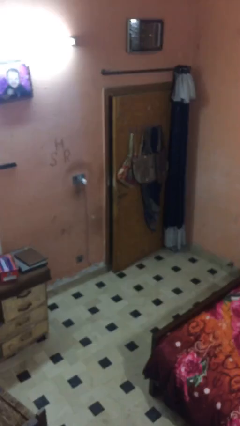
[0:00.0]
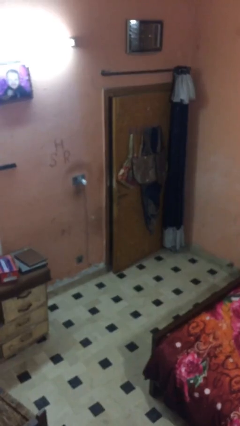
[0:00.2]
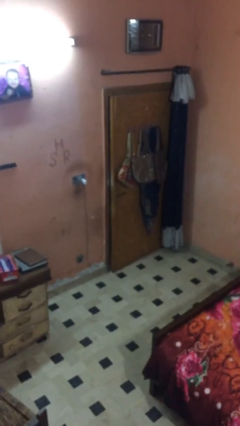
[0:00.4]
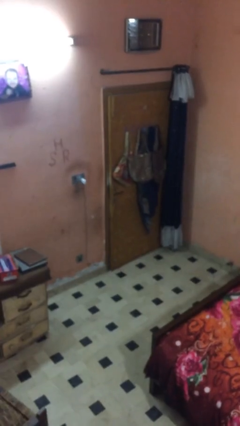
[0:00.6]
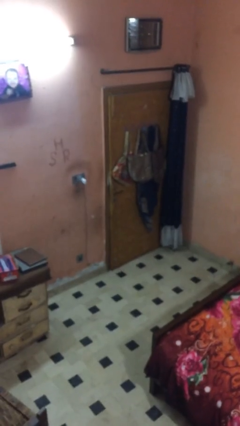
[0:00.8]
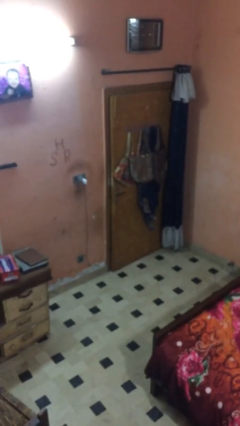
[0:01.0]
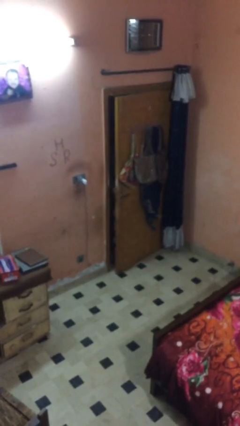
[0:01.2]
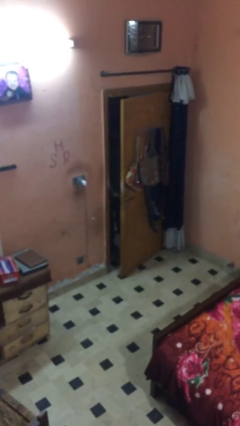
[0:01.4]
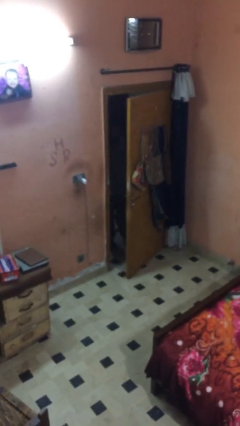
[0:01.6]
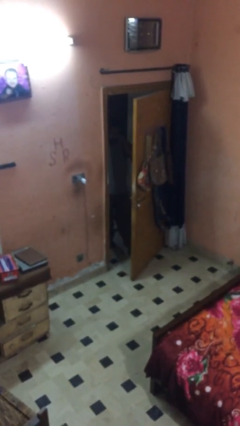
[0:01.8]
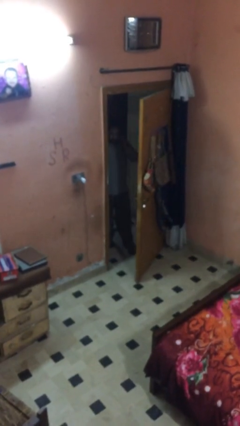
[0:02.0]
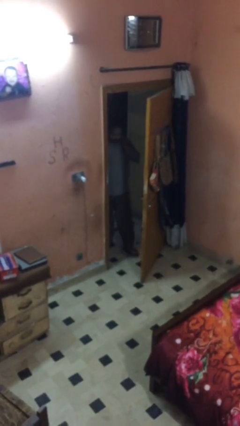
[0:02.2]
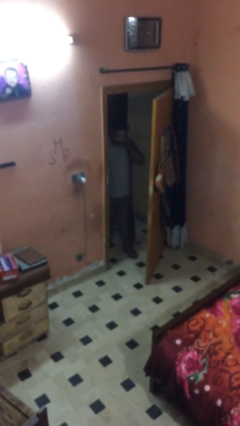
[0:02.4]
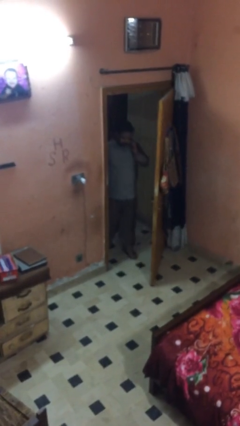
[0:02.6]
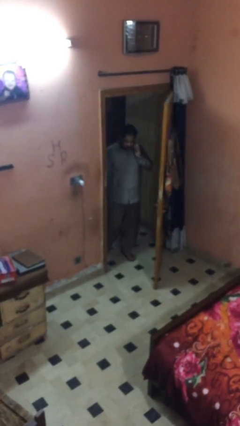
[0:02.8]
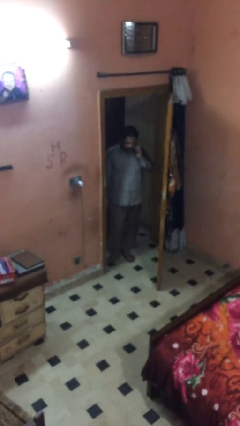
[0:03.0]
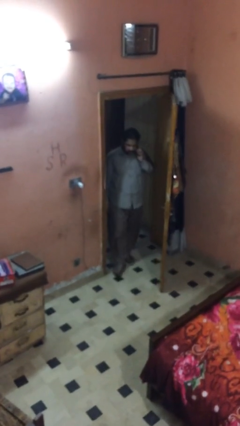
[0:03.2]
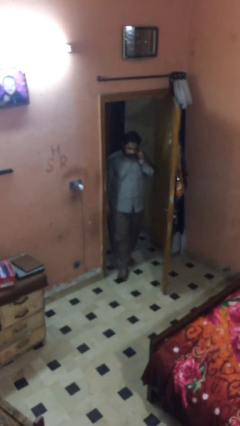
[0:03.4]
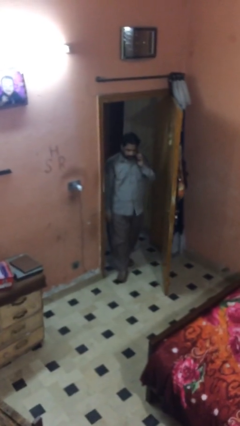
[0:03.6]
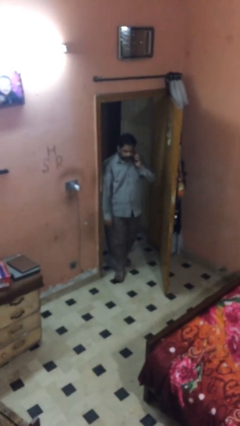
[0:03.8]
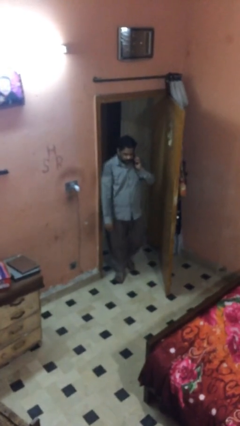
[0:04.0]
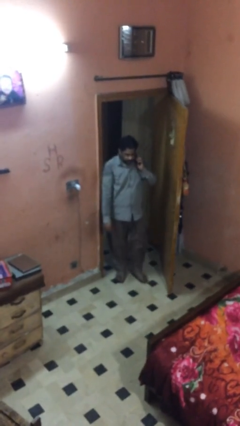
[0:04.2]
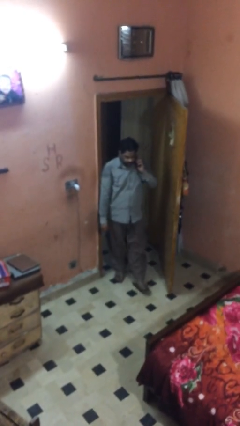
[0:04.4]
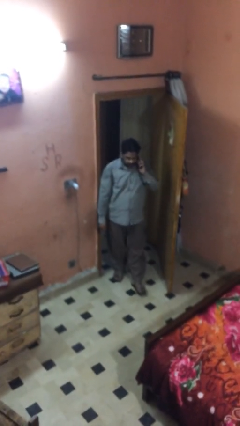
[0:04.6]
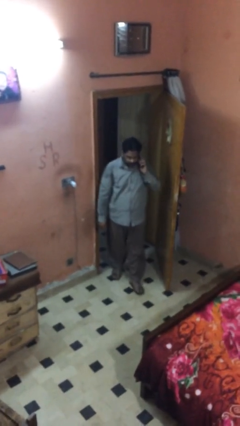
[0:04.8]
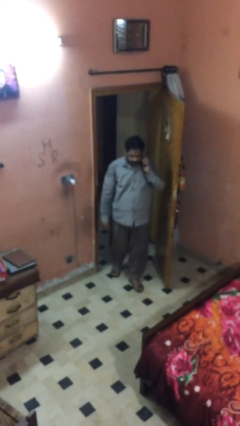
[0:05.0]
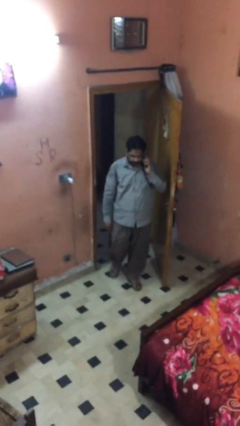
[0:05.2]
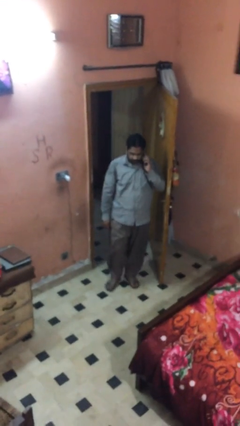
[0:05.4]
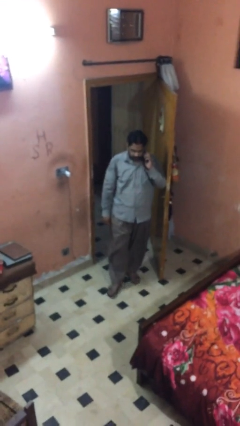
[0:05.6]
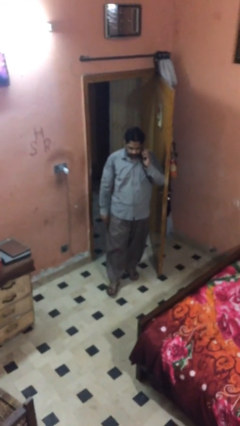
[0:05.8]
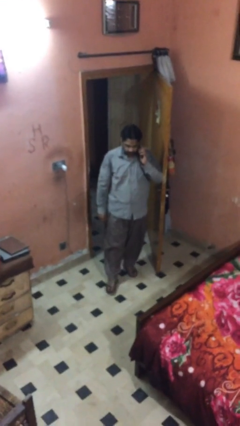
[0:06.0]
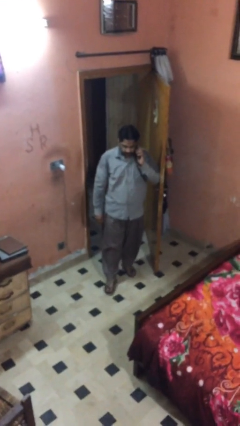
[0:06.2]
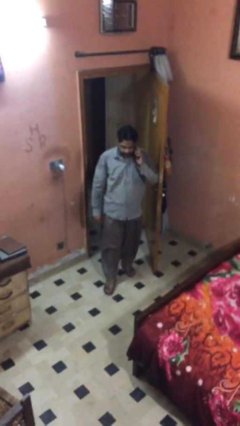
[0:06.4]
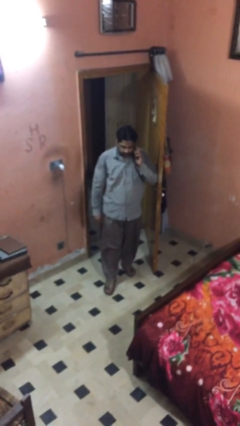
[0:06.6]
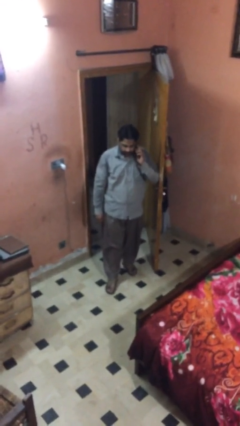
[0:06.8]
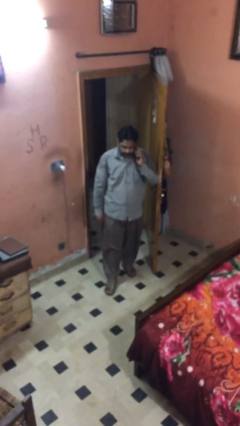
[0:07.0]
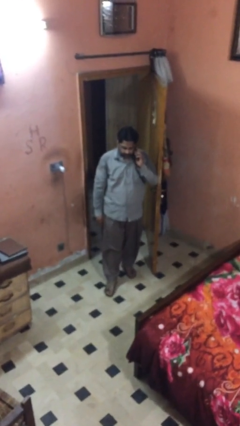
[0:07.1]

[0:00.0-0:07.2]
person enters scene through structure

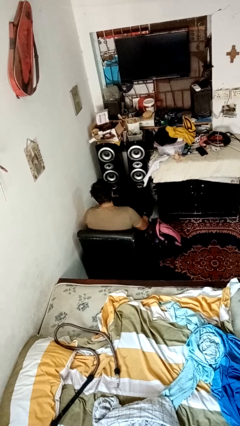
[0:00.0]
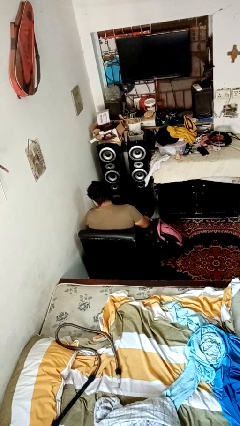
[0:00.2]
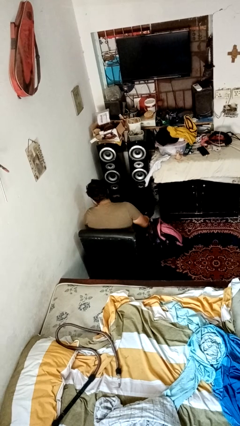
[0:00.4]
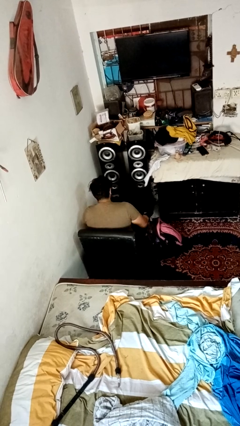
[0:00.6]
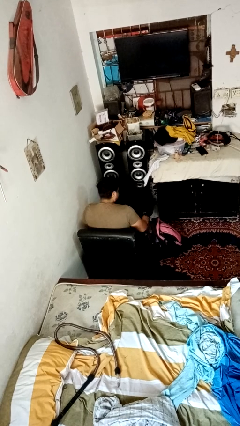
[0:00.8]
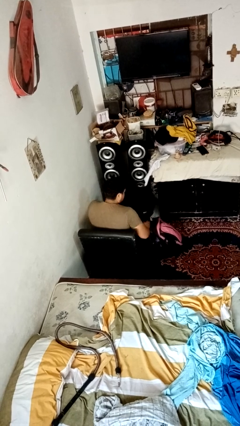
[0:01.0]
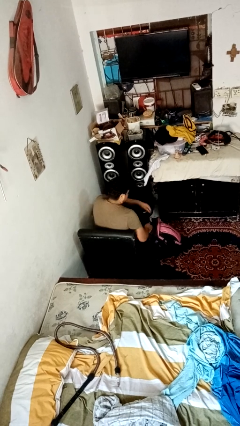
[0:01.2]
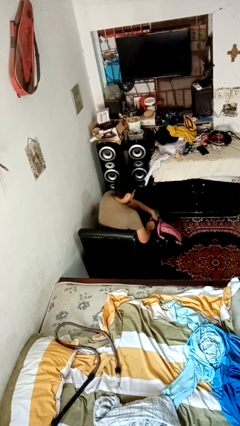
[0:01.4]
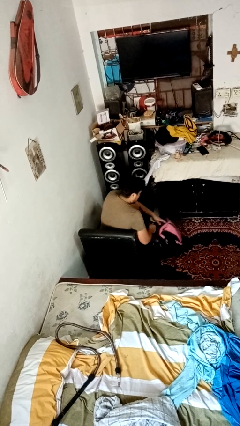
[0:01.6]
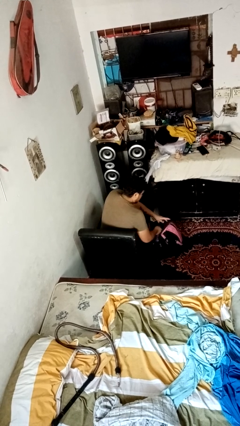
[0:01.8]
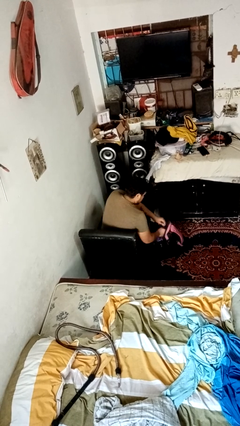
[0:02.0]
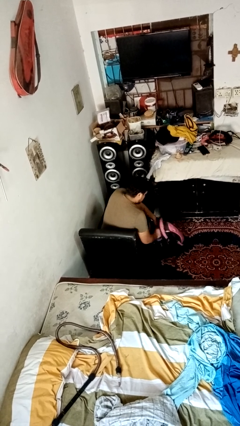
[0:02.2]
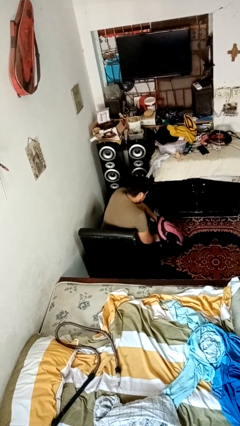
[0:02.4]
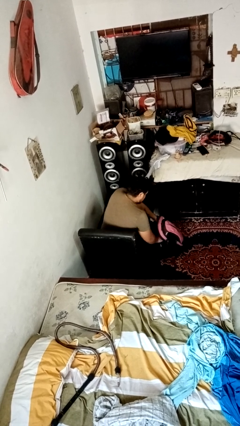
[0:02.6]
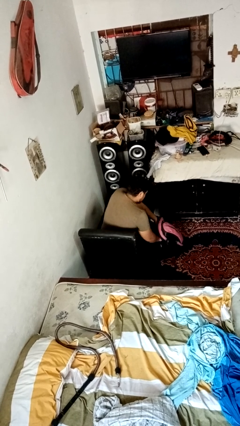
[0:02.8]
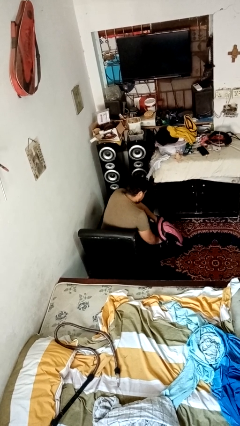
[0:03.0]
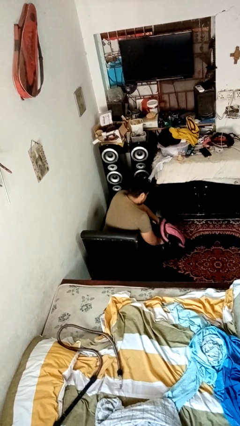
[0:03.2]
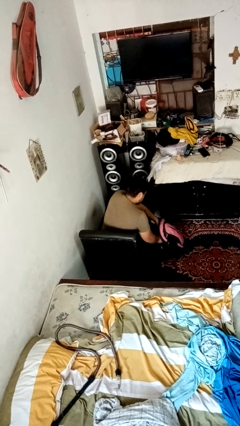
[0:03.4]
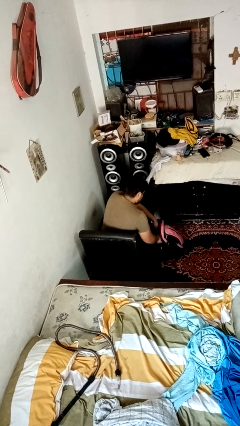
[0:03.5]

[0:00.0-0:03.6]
person searches in bag

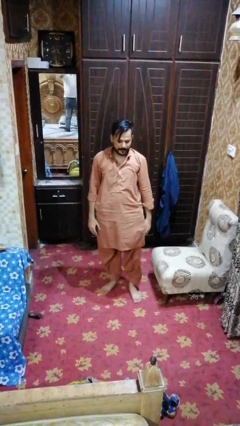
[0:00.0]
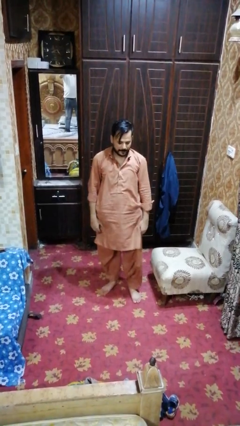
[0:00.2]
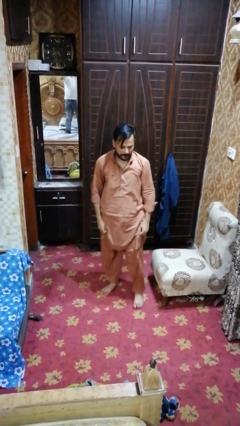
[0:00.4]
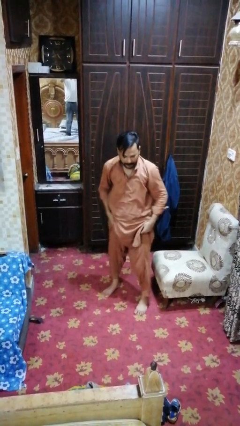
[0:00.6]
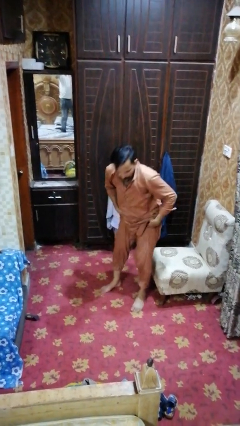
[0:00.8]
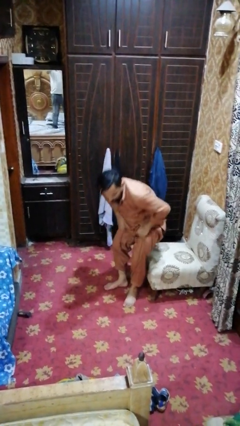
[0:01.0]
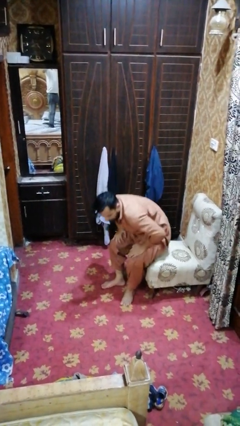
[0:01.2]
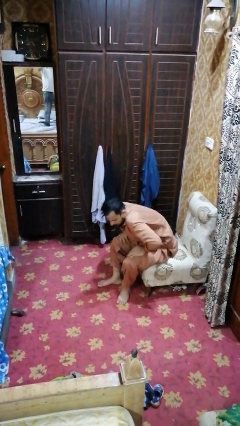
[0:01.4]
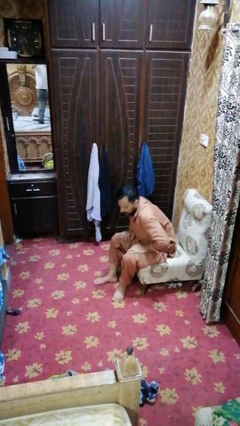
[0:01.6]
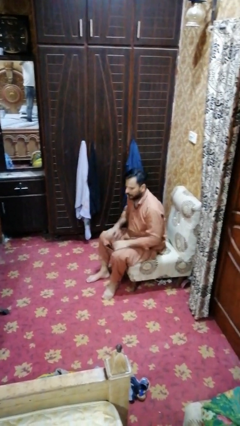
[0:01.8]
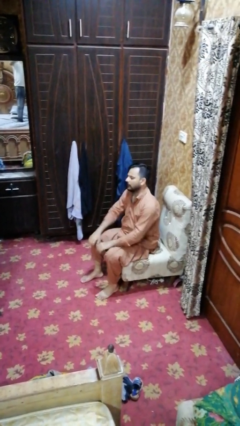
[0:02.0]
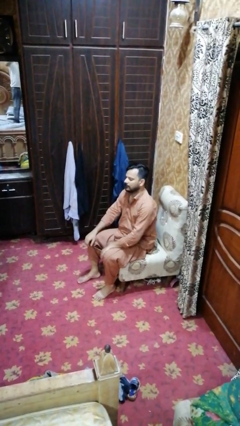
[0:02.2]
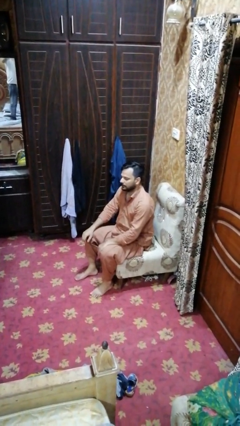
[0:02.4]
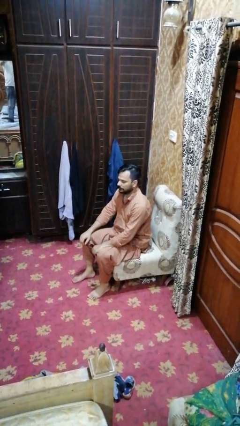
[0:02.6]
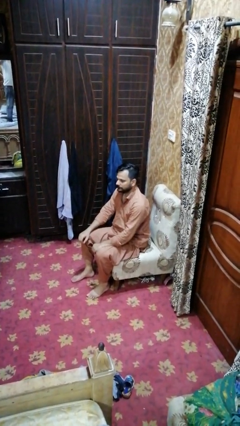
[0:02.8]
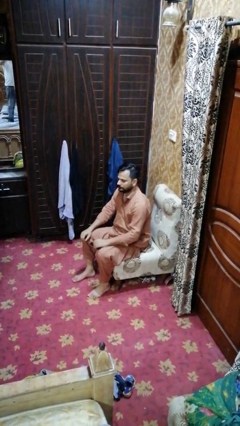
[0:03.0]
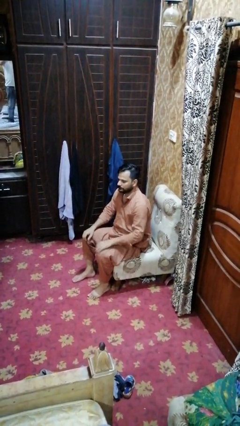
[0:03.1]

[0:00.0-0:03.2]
person sits down

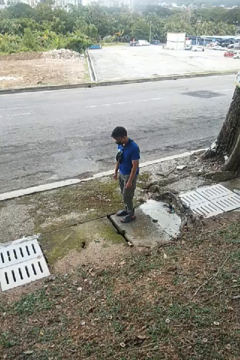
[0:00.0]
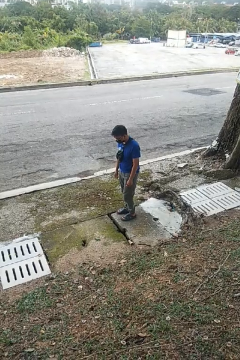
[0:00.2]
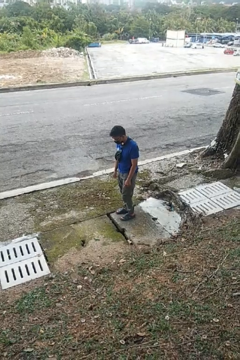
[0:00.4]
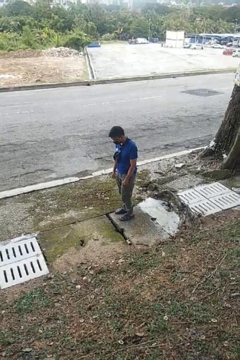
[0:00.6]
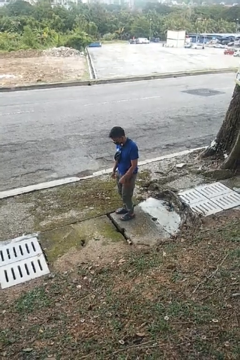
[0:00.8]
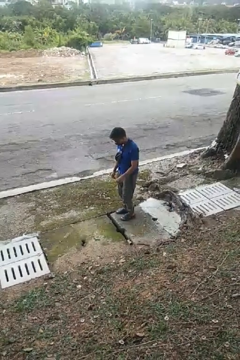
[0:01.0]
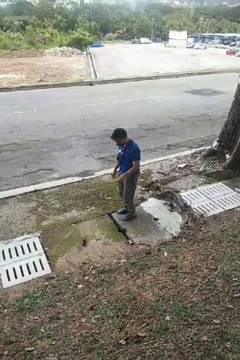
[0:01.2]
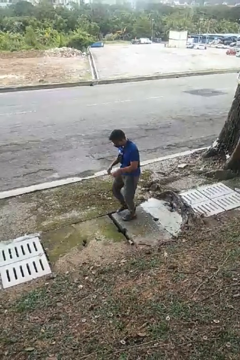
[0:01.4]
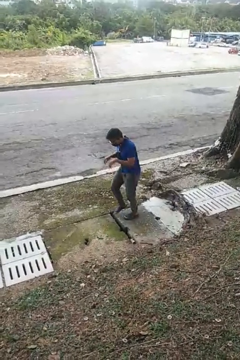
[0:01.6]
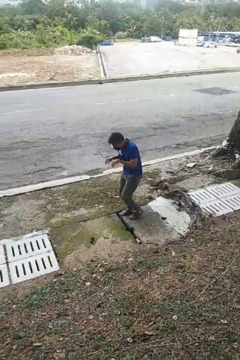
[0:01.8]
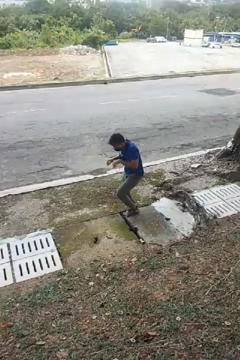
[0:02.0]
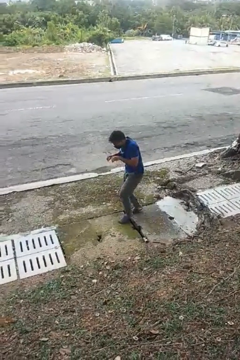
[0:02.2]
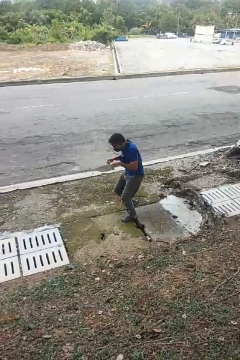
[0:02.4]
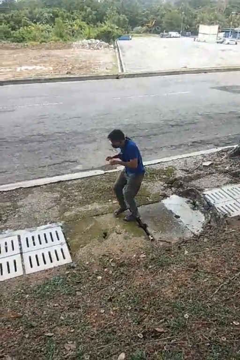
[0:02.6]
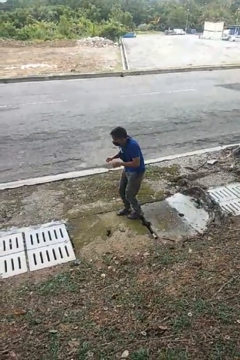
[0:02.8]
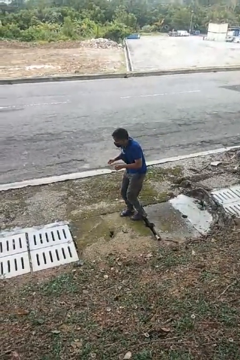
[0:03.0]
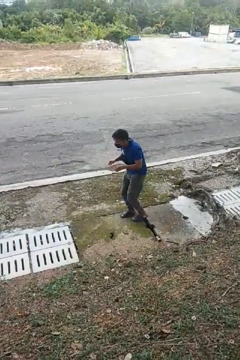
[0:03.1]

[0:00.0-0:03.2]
person walks tiptoe

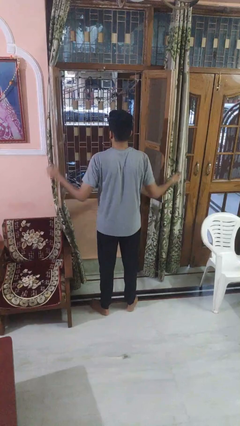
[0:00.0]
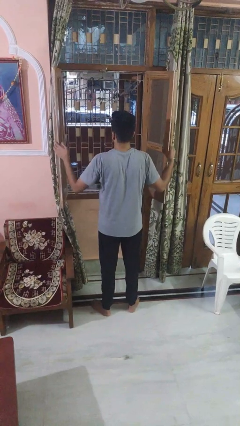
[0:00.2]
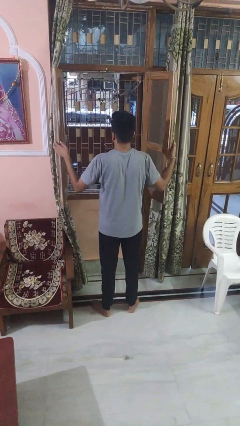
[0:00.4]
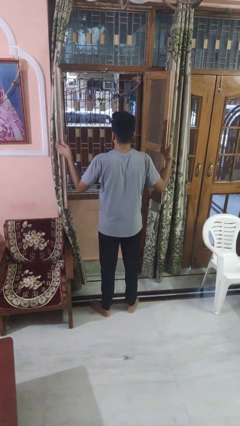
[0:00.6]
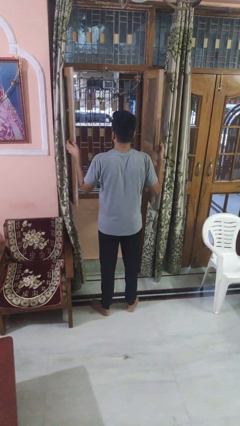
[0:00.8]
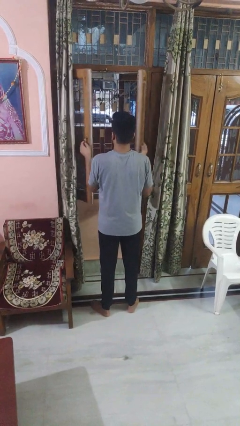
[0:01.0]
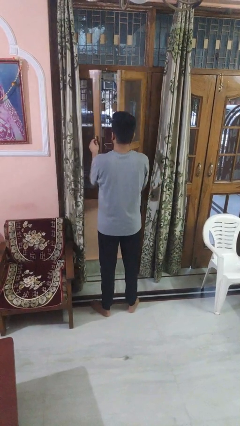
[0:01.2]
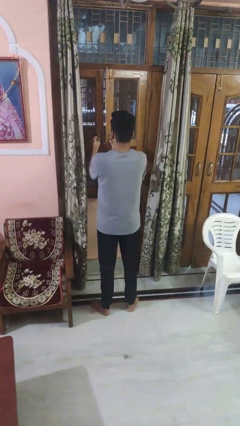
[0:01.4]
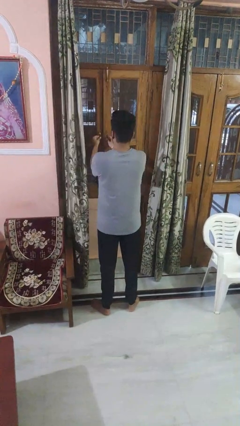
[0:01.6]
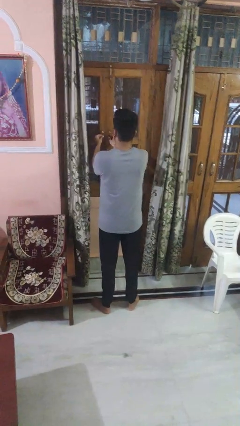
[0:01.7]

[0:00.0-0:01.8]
person closes home window
